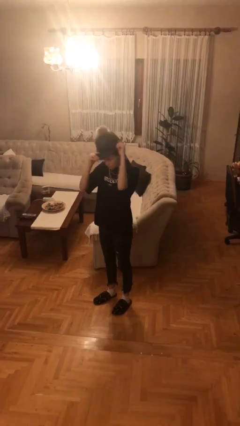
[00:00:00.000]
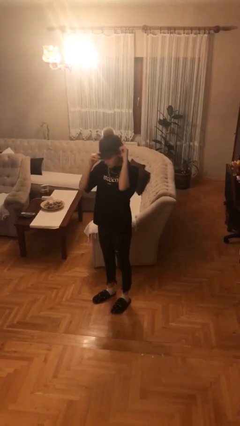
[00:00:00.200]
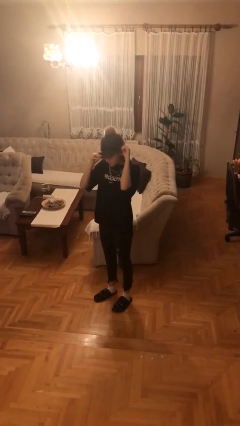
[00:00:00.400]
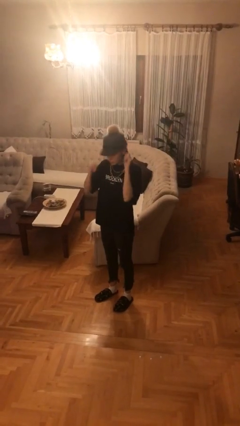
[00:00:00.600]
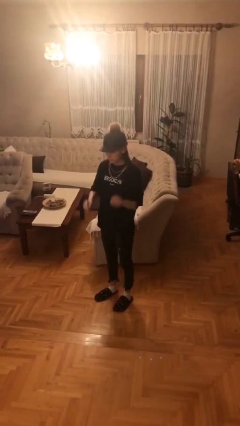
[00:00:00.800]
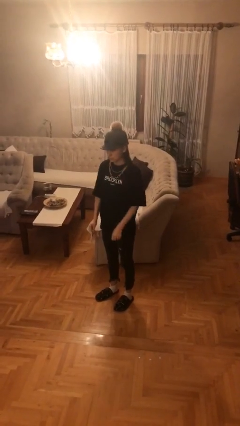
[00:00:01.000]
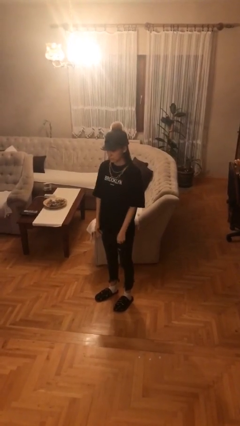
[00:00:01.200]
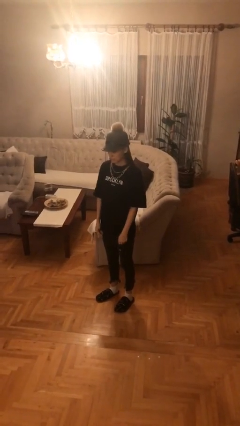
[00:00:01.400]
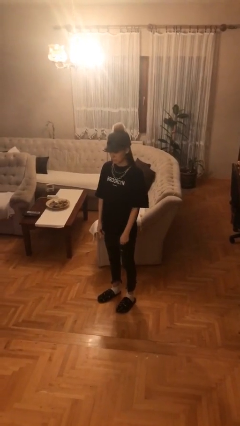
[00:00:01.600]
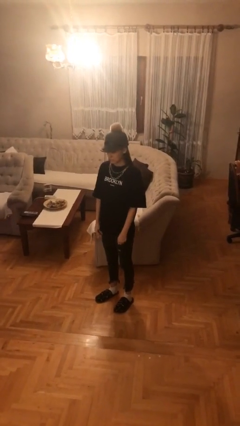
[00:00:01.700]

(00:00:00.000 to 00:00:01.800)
person puts on hat

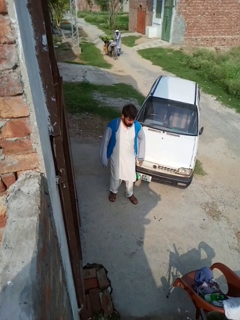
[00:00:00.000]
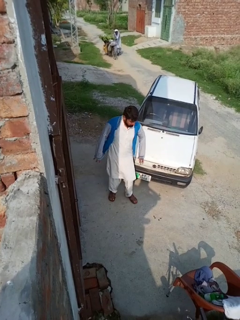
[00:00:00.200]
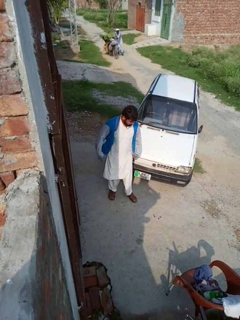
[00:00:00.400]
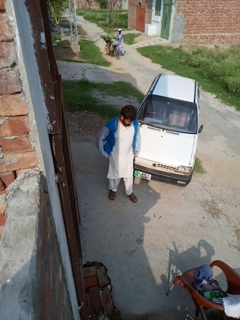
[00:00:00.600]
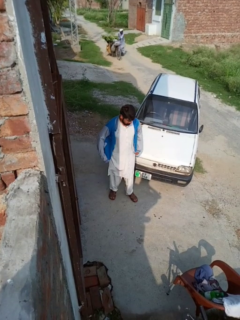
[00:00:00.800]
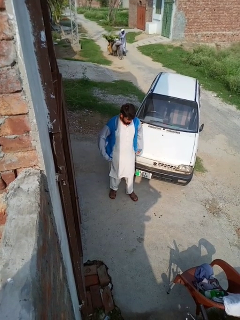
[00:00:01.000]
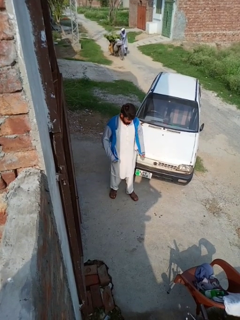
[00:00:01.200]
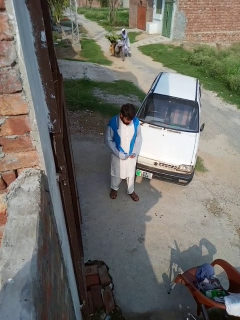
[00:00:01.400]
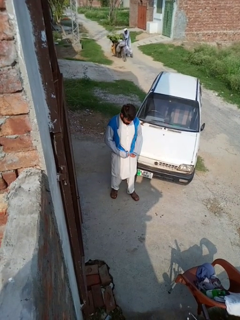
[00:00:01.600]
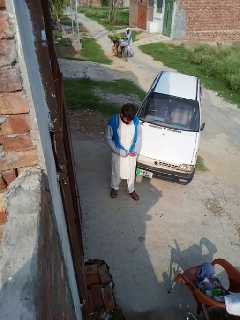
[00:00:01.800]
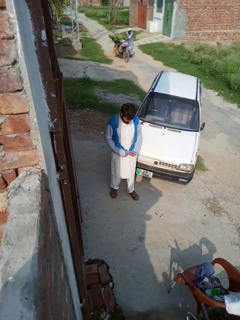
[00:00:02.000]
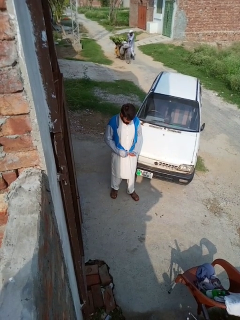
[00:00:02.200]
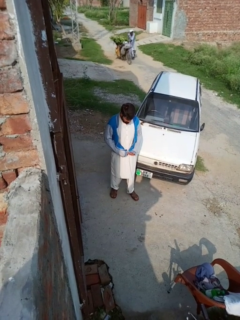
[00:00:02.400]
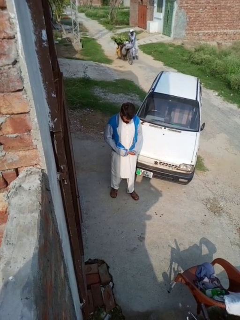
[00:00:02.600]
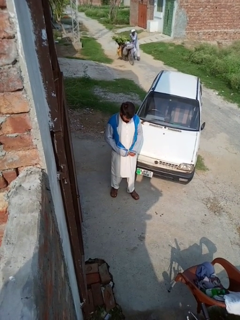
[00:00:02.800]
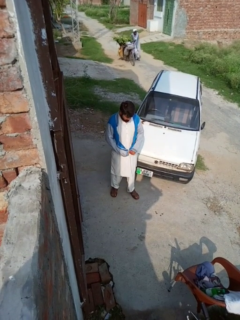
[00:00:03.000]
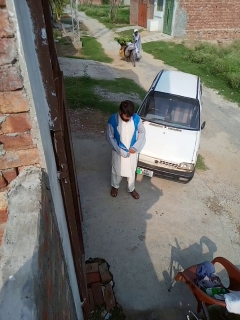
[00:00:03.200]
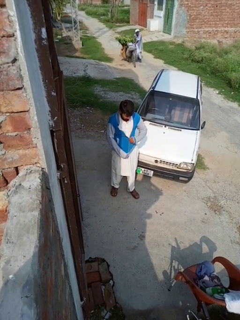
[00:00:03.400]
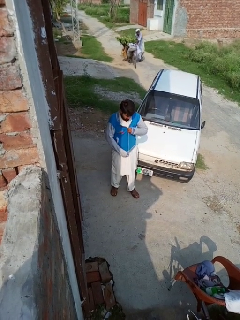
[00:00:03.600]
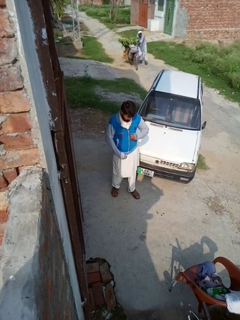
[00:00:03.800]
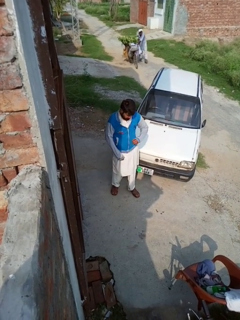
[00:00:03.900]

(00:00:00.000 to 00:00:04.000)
person zips up jacket

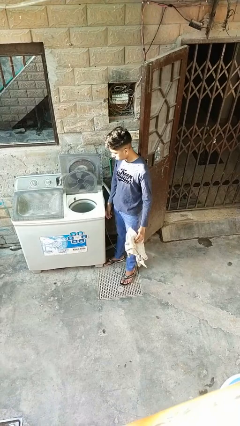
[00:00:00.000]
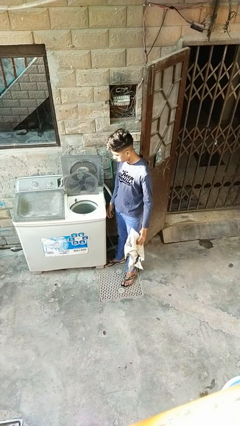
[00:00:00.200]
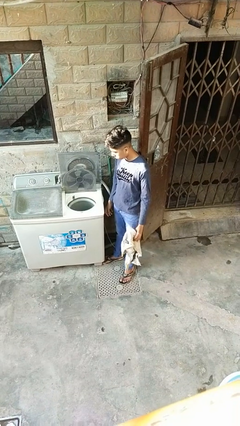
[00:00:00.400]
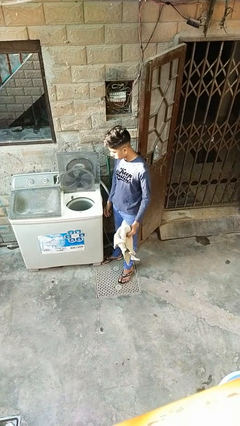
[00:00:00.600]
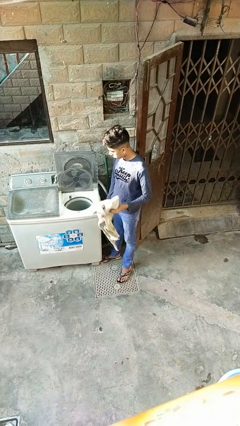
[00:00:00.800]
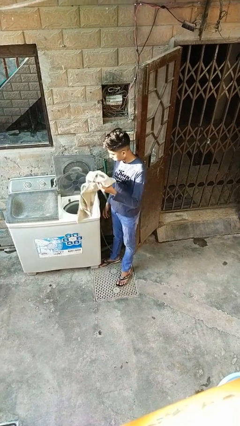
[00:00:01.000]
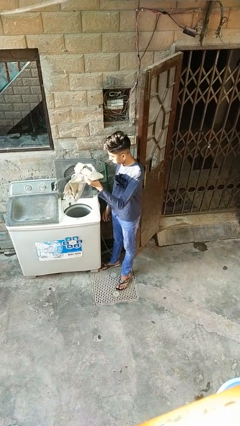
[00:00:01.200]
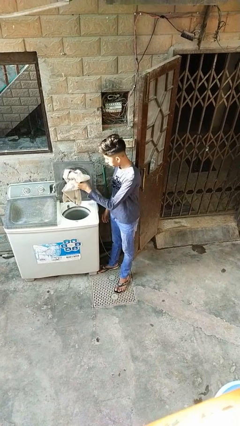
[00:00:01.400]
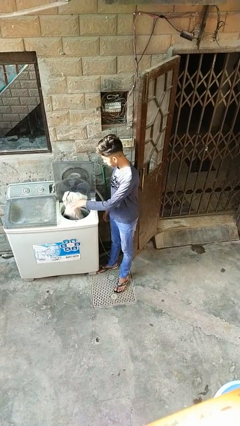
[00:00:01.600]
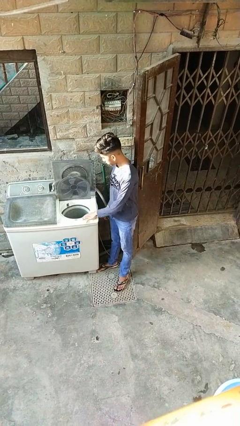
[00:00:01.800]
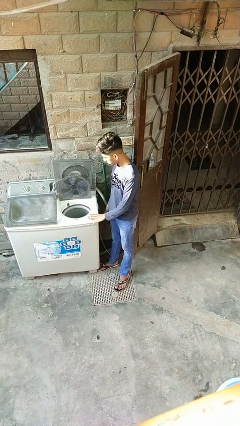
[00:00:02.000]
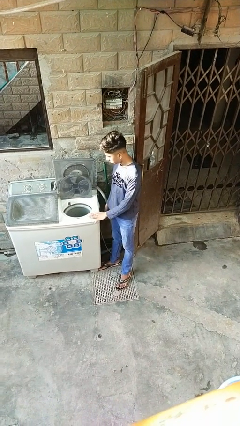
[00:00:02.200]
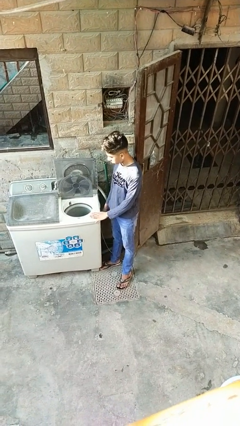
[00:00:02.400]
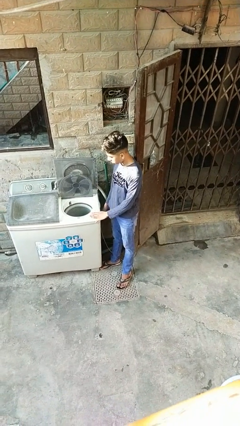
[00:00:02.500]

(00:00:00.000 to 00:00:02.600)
person loads dryer

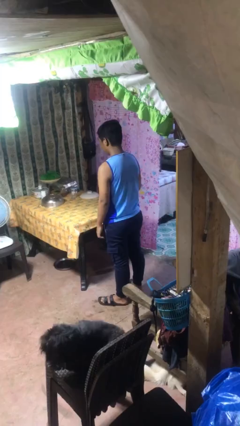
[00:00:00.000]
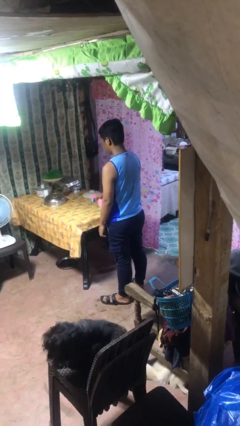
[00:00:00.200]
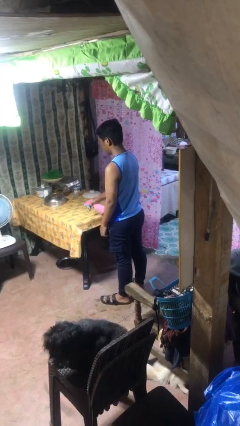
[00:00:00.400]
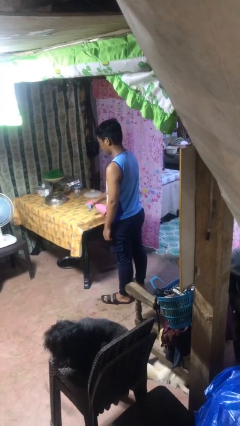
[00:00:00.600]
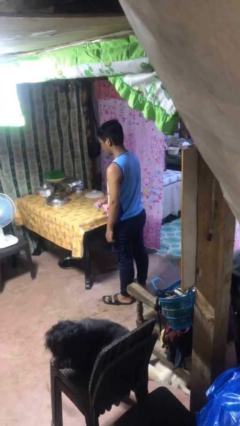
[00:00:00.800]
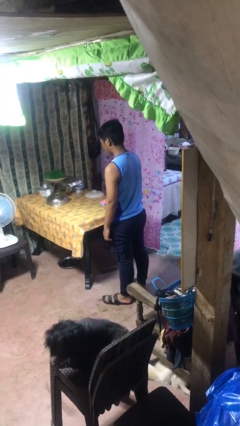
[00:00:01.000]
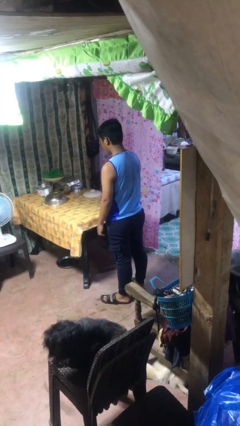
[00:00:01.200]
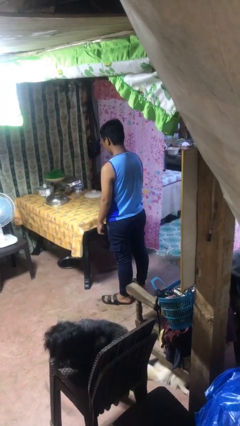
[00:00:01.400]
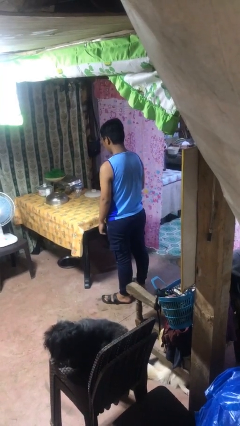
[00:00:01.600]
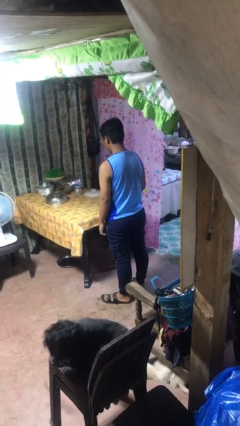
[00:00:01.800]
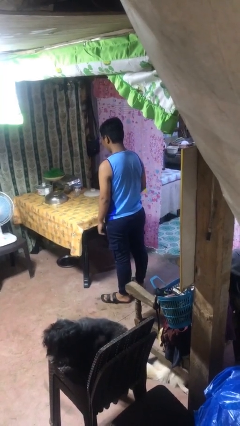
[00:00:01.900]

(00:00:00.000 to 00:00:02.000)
person sprays from bottle

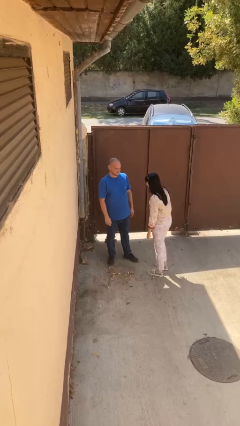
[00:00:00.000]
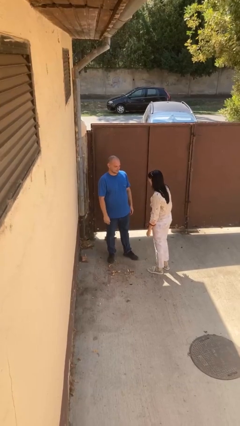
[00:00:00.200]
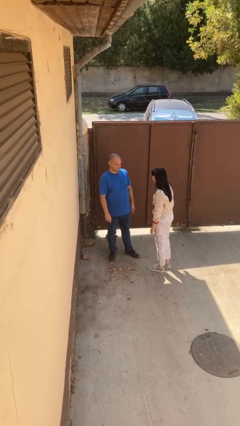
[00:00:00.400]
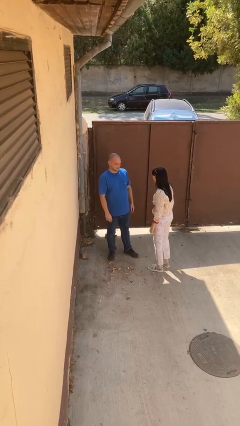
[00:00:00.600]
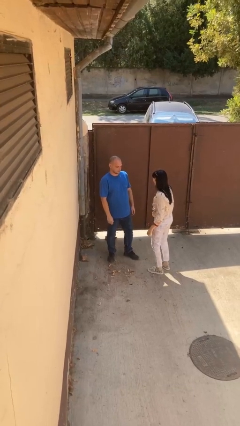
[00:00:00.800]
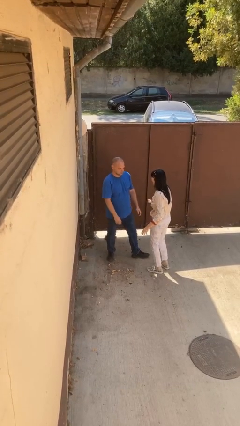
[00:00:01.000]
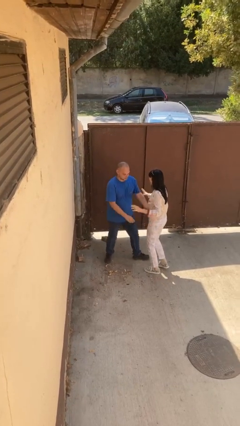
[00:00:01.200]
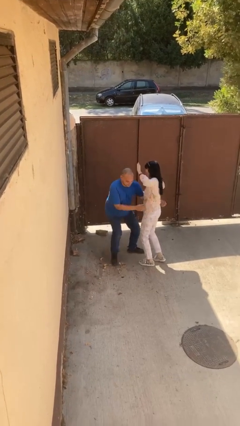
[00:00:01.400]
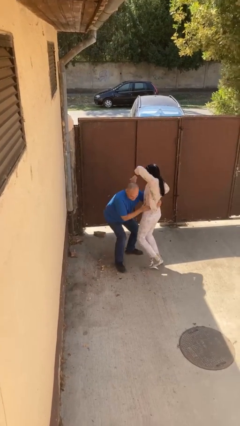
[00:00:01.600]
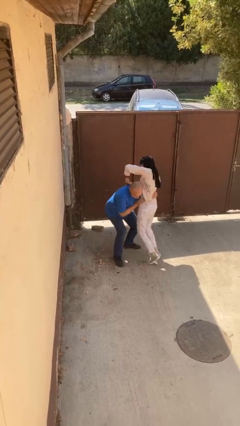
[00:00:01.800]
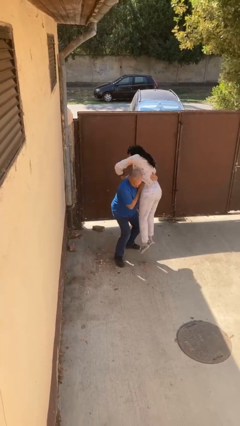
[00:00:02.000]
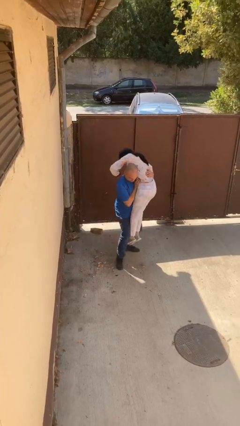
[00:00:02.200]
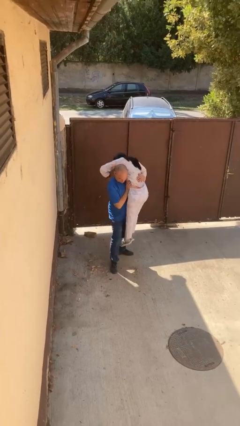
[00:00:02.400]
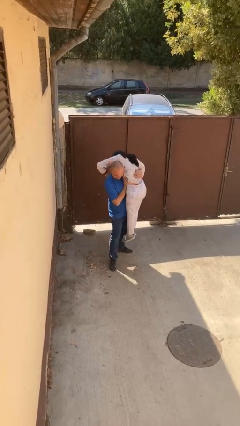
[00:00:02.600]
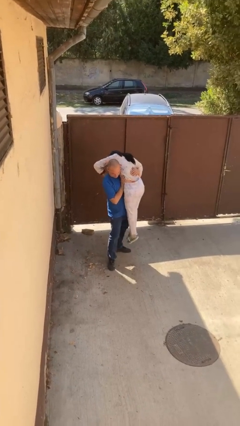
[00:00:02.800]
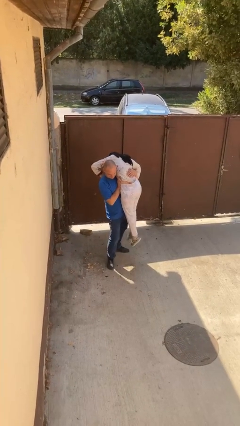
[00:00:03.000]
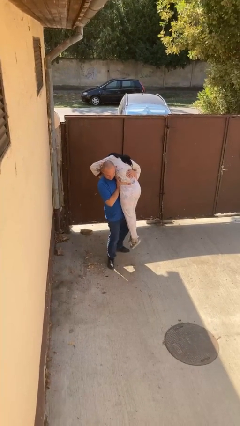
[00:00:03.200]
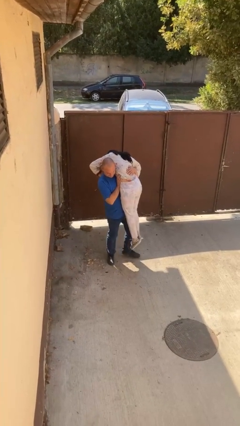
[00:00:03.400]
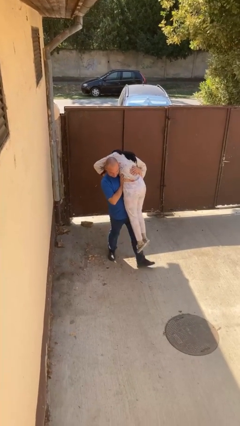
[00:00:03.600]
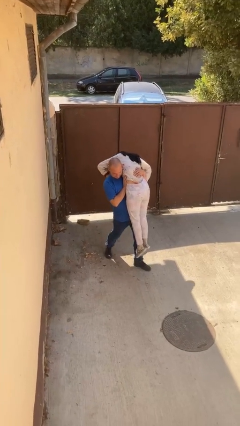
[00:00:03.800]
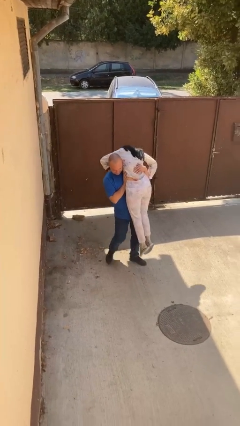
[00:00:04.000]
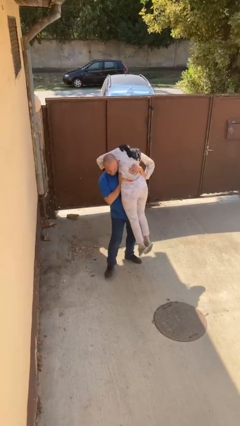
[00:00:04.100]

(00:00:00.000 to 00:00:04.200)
person carries person over shoulder

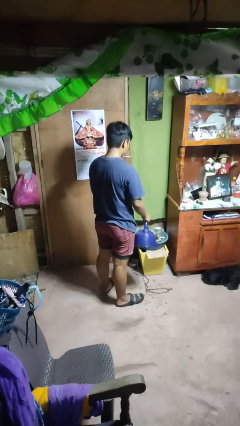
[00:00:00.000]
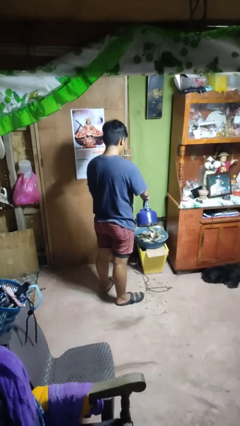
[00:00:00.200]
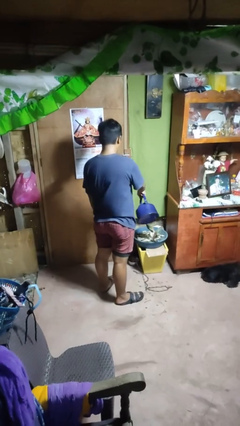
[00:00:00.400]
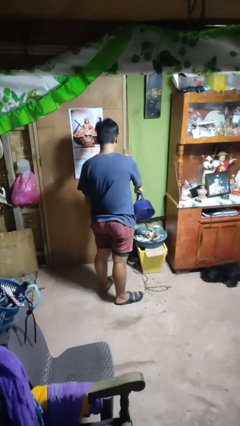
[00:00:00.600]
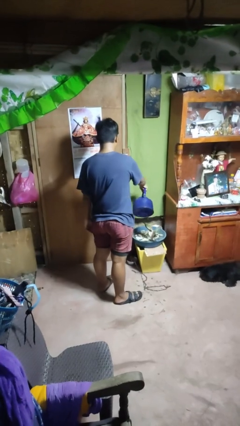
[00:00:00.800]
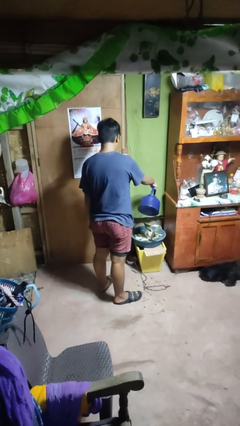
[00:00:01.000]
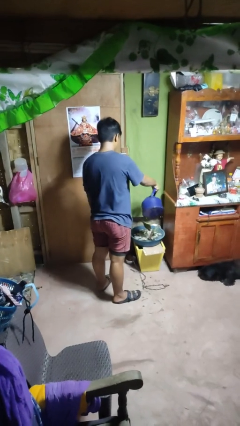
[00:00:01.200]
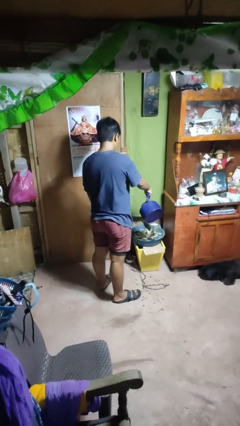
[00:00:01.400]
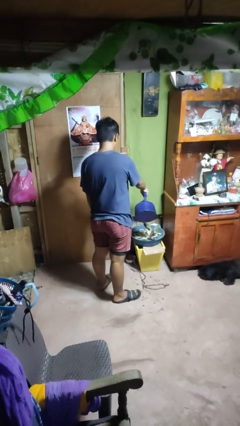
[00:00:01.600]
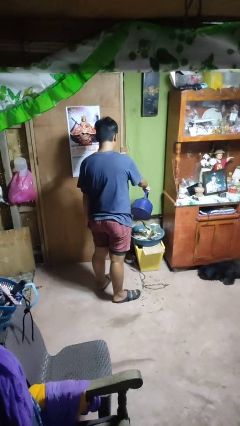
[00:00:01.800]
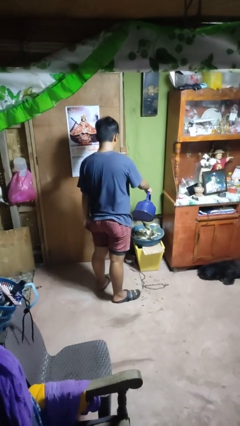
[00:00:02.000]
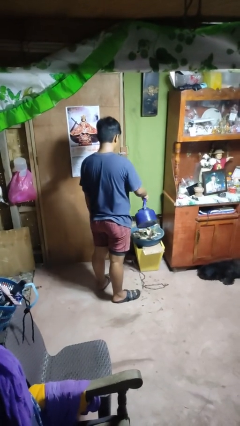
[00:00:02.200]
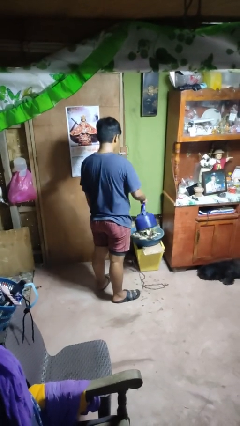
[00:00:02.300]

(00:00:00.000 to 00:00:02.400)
person waters houseplant

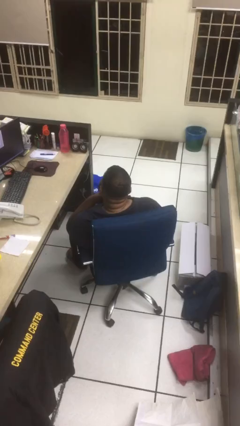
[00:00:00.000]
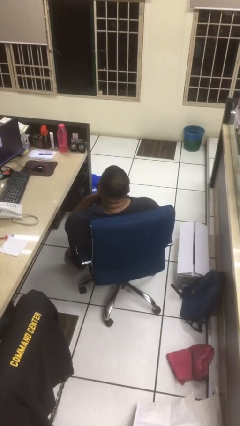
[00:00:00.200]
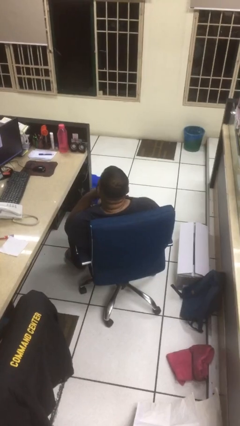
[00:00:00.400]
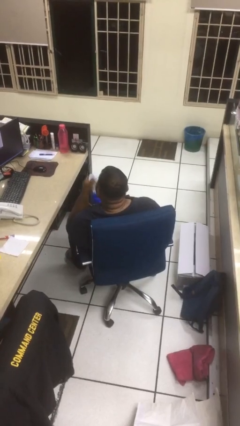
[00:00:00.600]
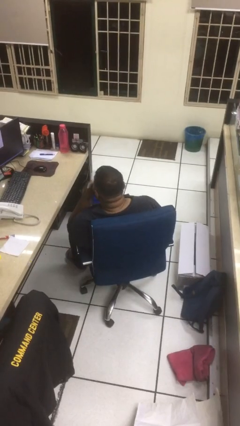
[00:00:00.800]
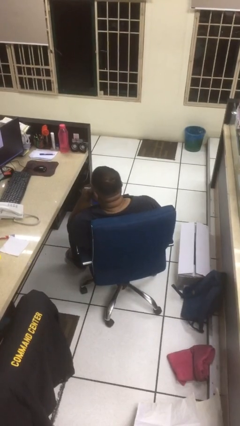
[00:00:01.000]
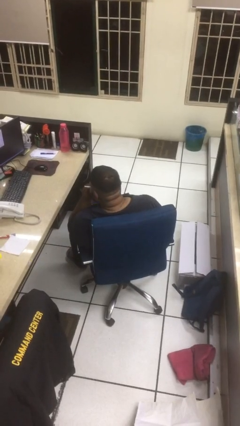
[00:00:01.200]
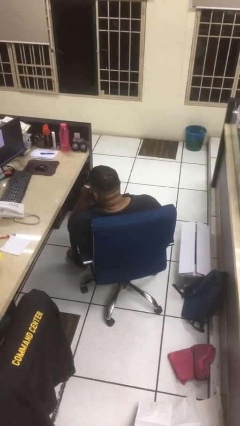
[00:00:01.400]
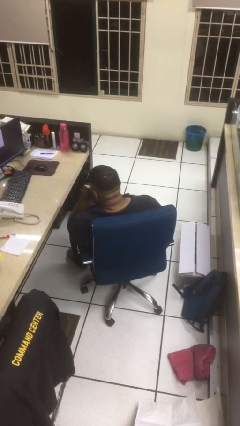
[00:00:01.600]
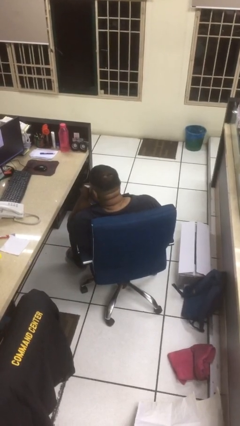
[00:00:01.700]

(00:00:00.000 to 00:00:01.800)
person blows nose
